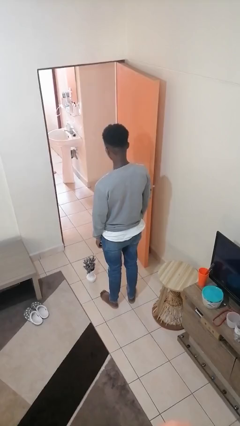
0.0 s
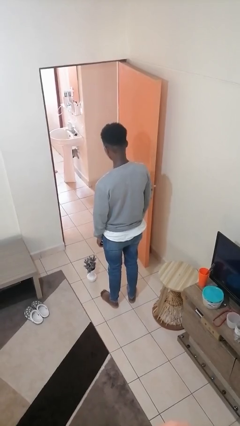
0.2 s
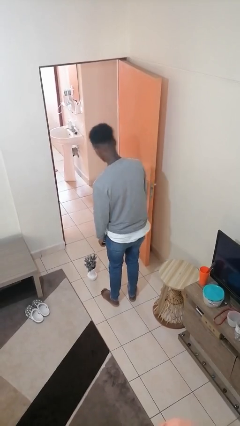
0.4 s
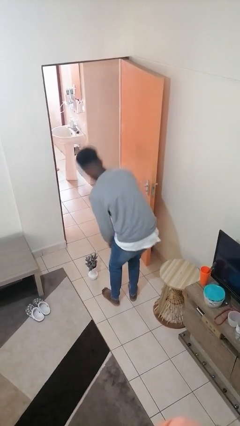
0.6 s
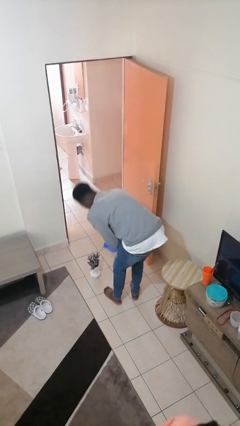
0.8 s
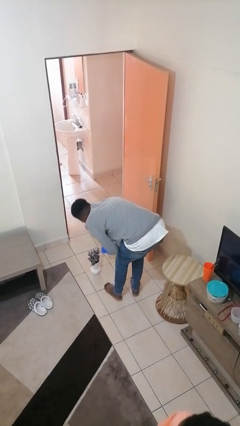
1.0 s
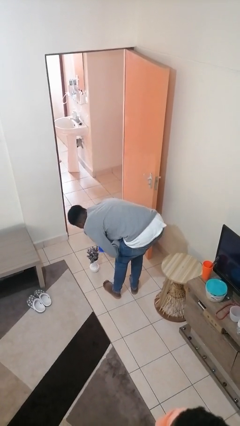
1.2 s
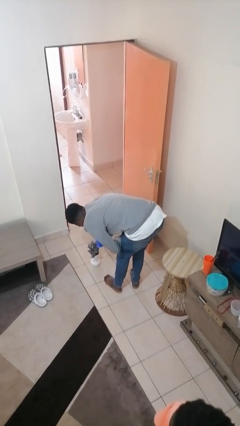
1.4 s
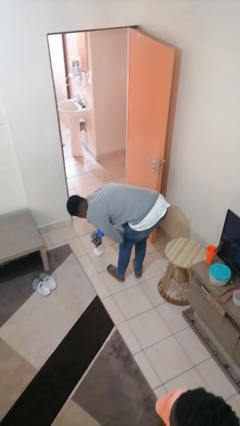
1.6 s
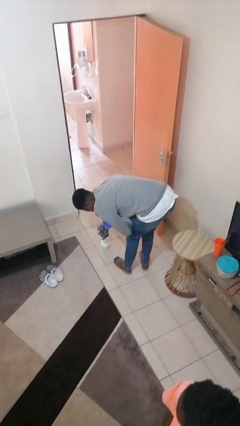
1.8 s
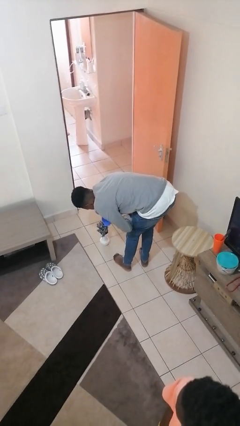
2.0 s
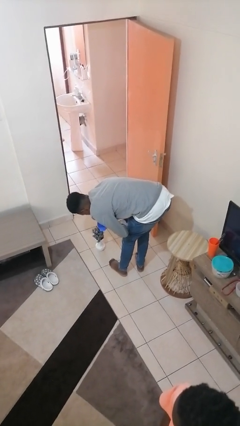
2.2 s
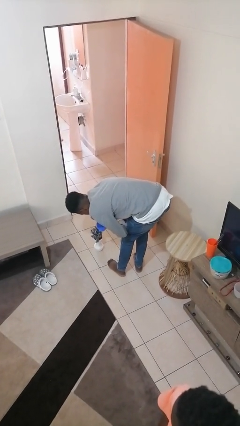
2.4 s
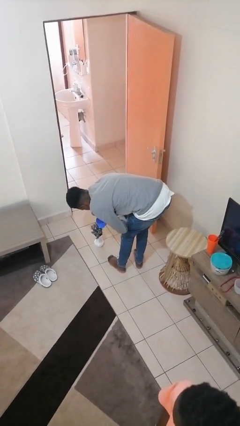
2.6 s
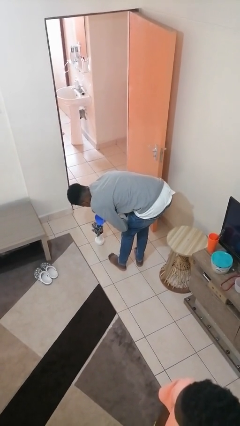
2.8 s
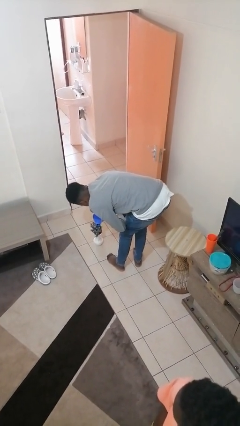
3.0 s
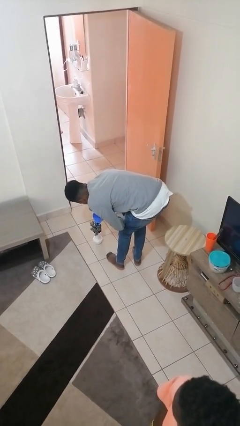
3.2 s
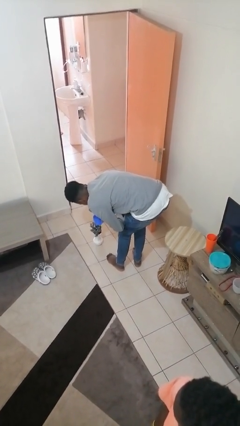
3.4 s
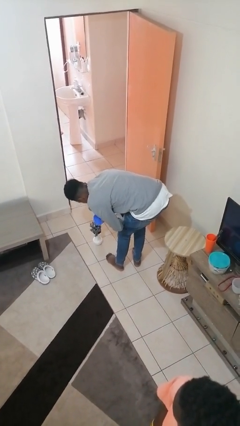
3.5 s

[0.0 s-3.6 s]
person waters houseplant

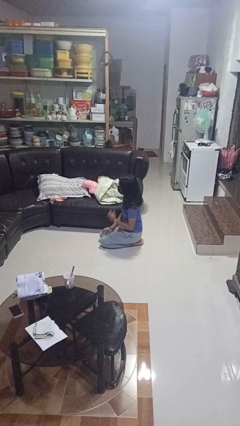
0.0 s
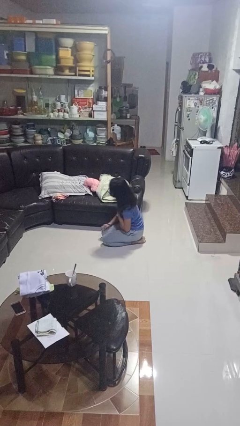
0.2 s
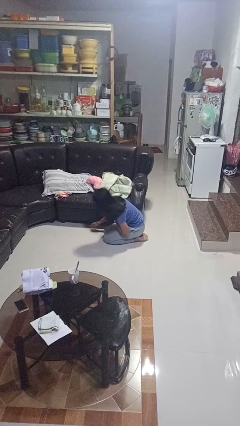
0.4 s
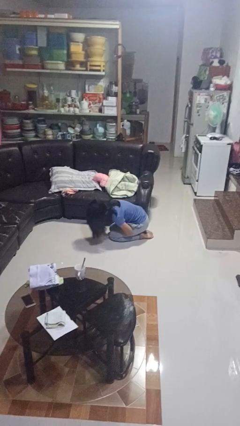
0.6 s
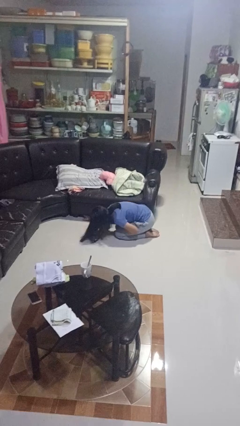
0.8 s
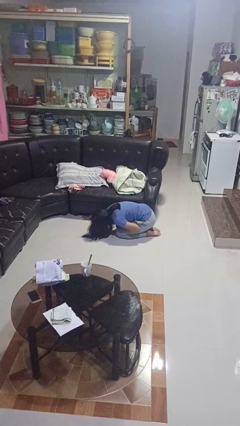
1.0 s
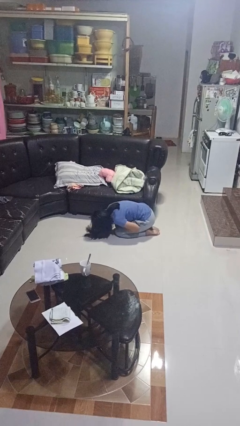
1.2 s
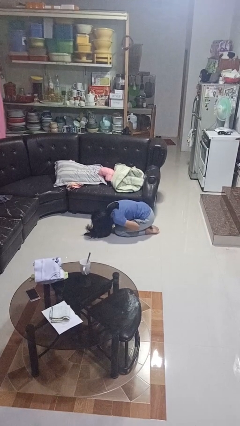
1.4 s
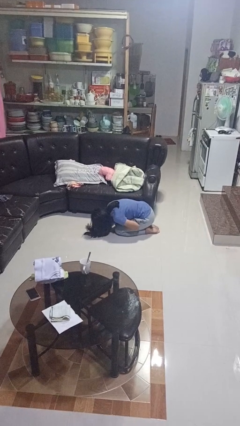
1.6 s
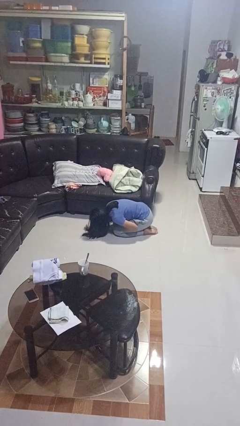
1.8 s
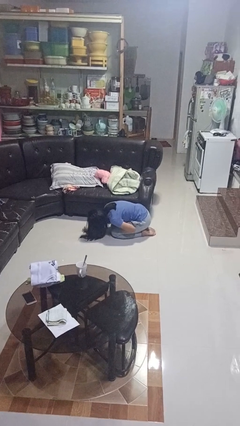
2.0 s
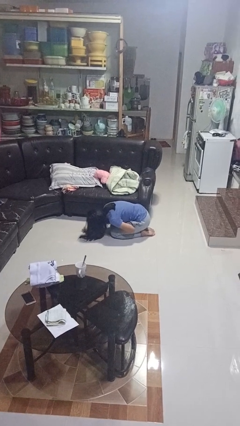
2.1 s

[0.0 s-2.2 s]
person searches under couch

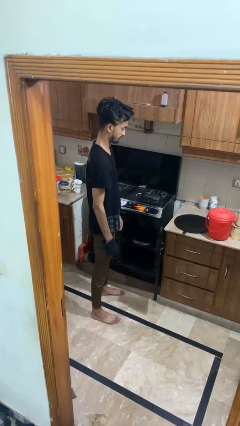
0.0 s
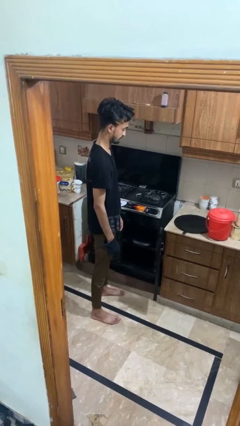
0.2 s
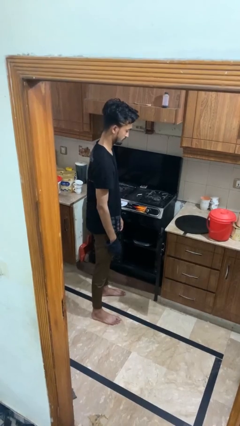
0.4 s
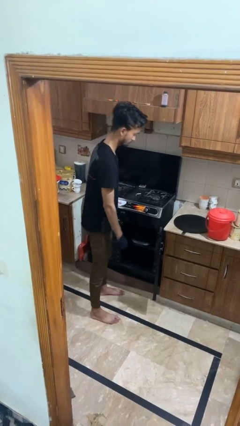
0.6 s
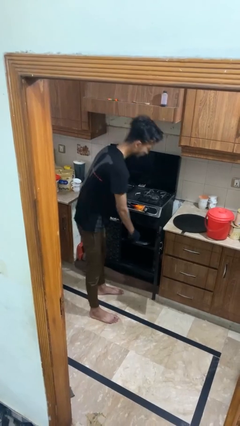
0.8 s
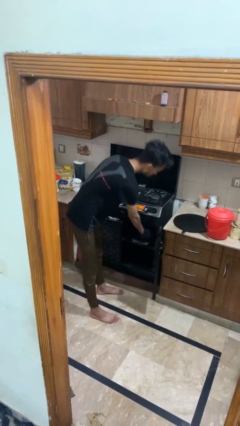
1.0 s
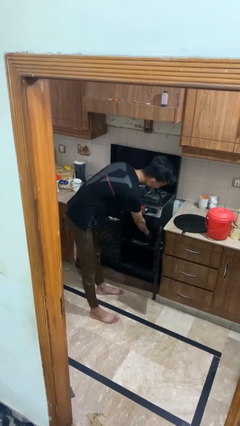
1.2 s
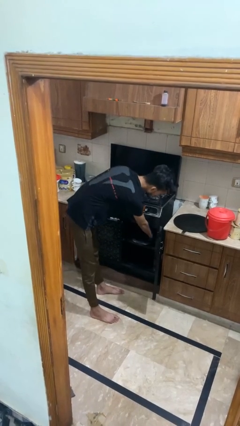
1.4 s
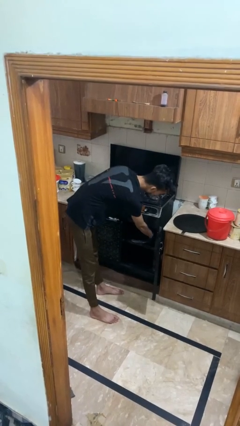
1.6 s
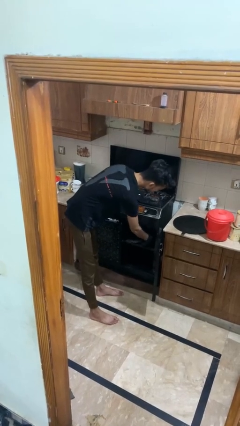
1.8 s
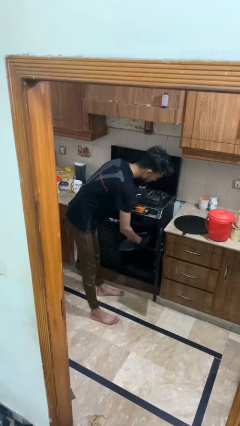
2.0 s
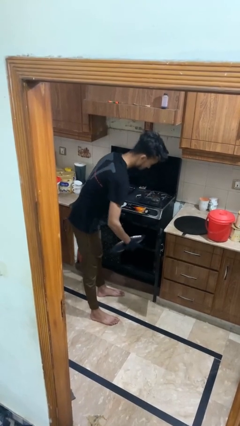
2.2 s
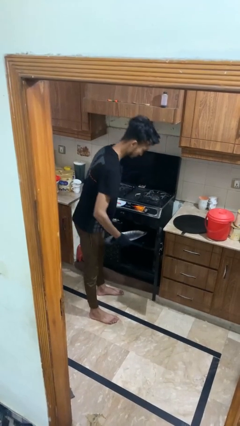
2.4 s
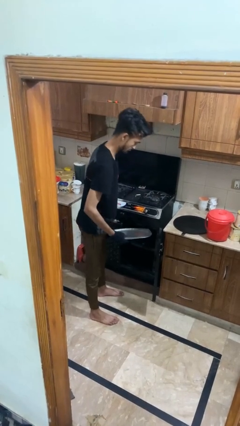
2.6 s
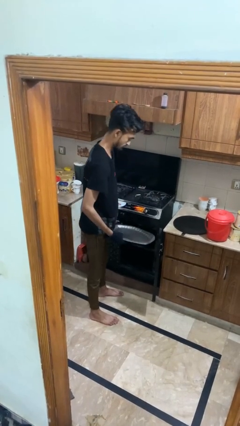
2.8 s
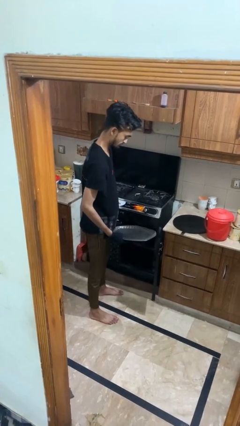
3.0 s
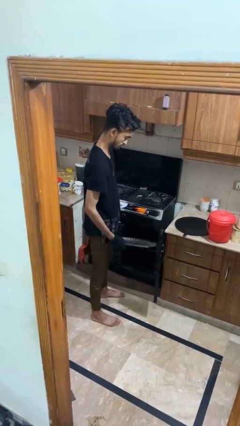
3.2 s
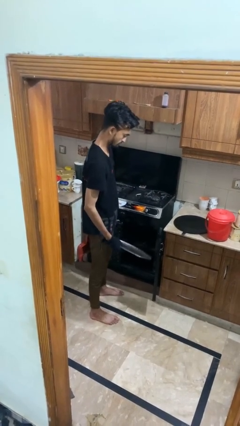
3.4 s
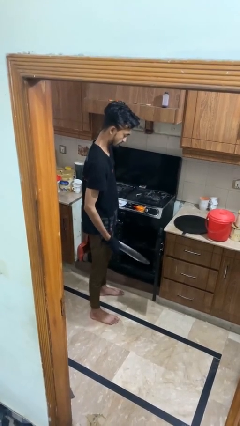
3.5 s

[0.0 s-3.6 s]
person takes object from oven

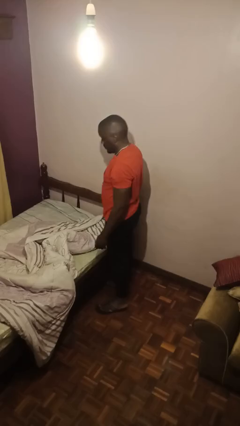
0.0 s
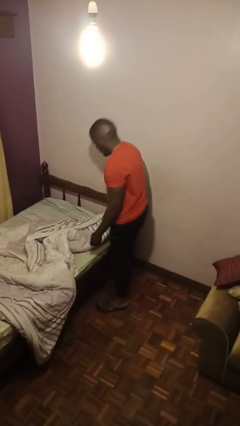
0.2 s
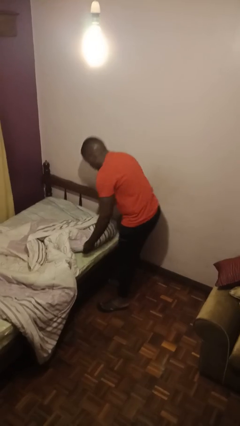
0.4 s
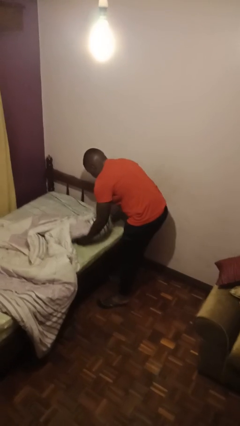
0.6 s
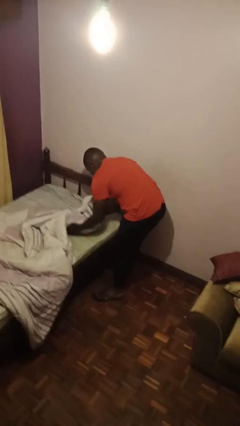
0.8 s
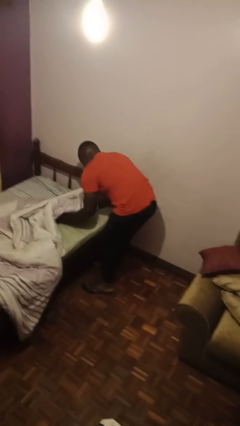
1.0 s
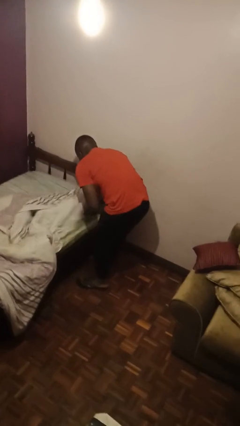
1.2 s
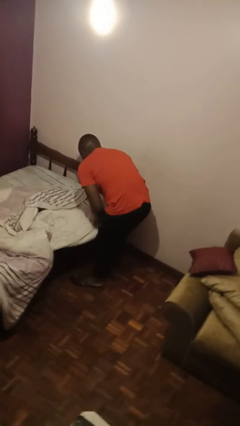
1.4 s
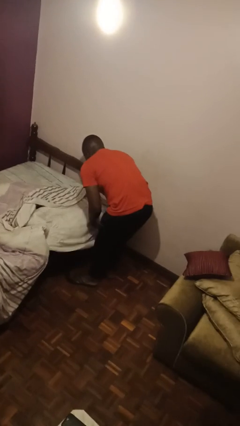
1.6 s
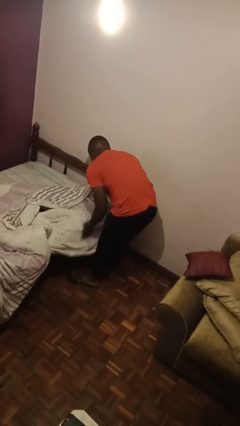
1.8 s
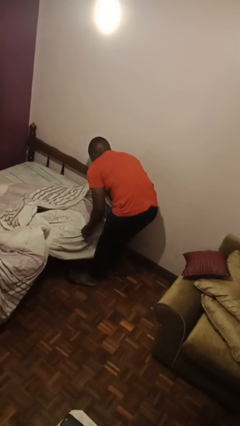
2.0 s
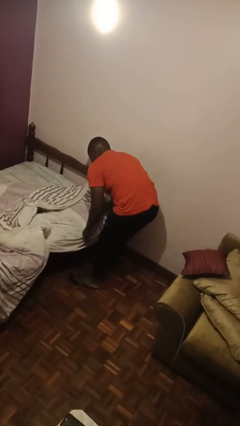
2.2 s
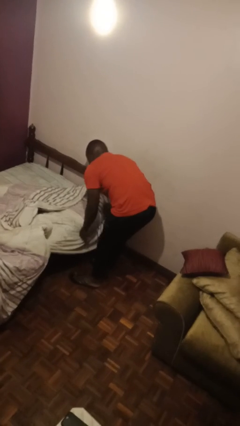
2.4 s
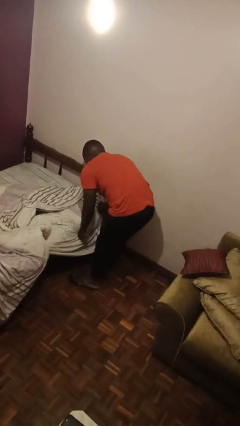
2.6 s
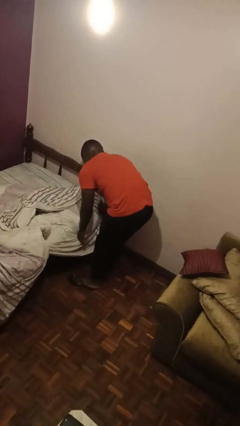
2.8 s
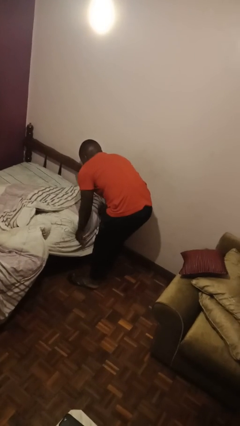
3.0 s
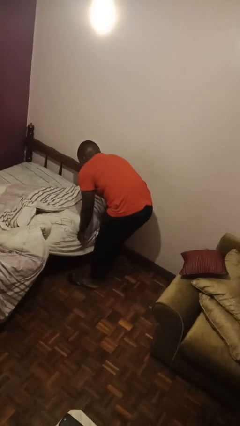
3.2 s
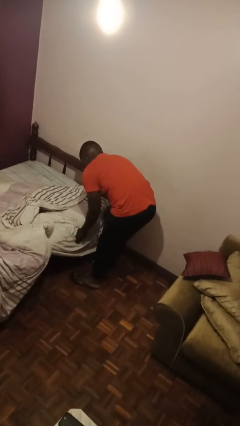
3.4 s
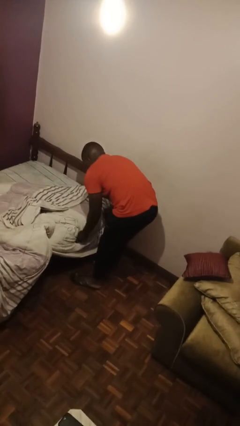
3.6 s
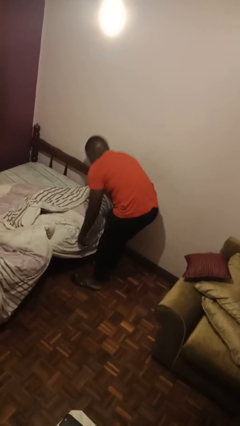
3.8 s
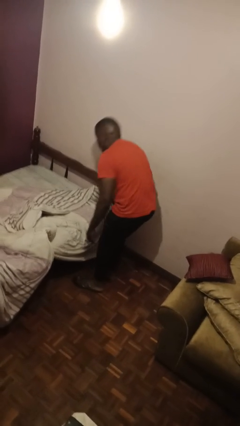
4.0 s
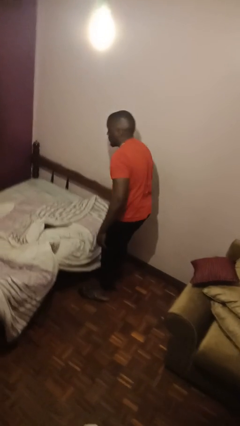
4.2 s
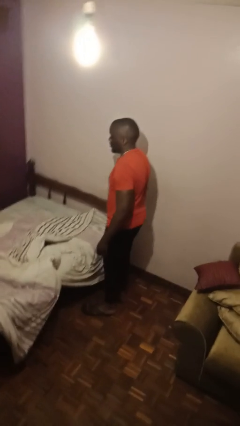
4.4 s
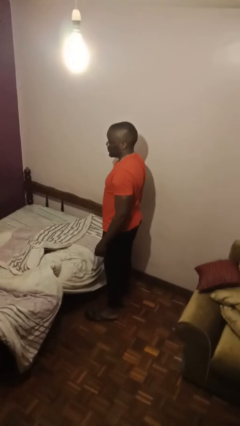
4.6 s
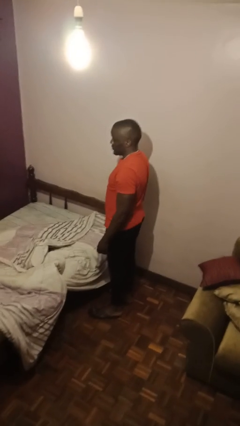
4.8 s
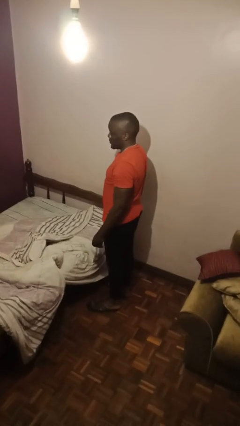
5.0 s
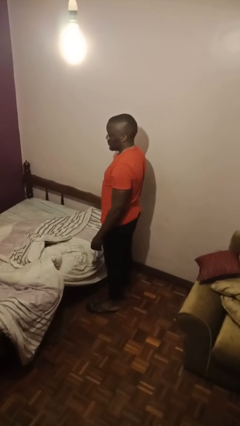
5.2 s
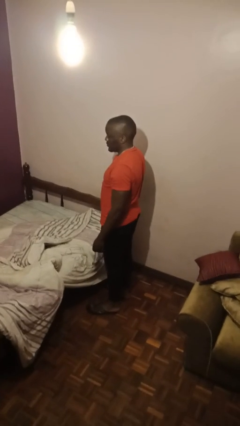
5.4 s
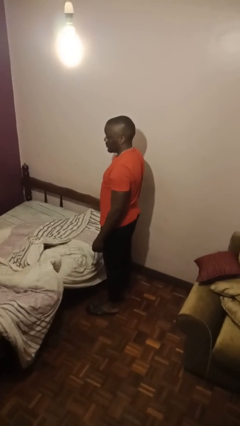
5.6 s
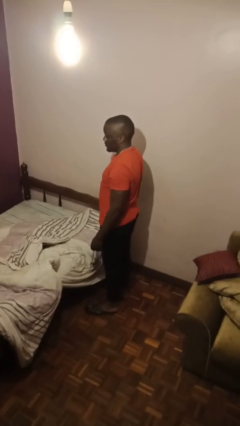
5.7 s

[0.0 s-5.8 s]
person makes bed

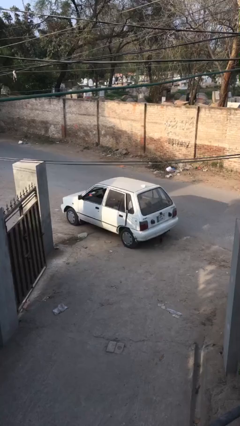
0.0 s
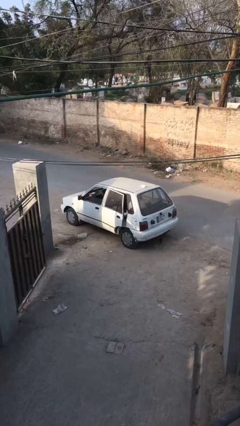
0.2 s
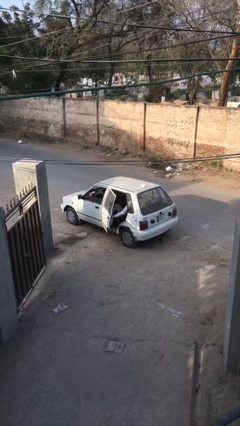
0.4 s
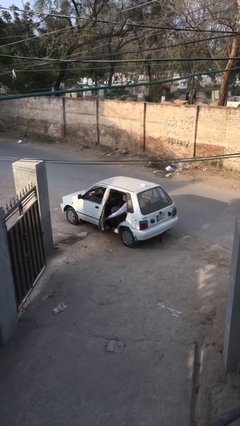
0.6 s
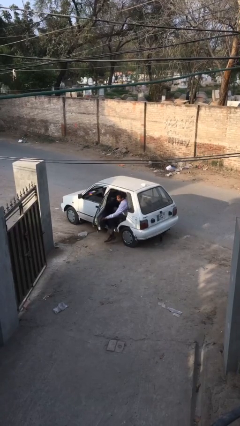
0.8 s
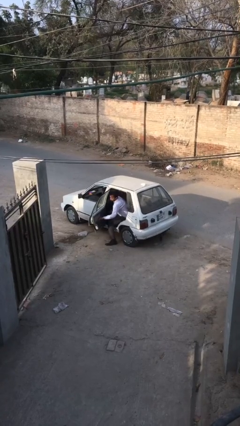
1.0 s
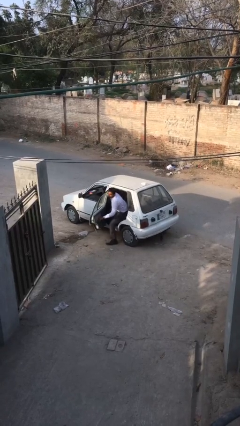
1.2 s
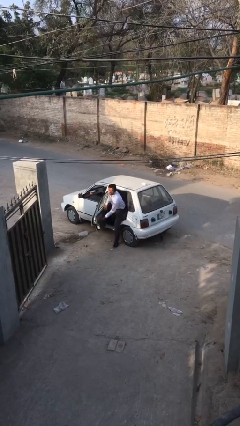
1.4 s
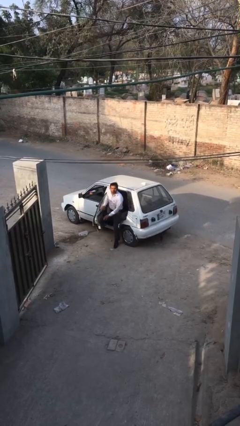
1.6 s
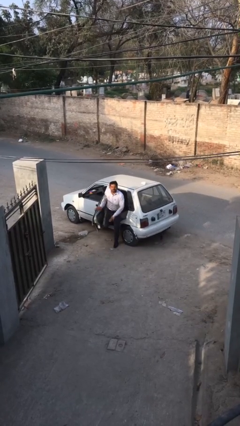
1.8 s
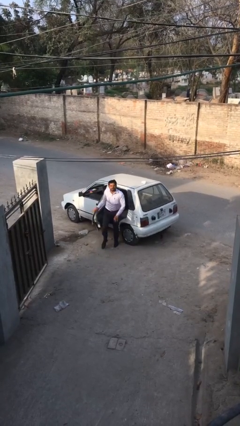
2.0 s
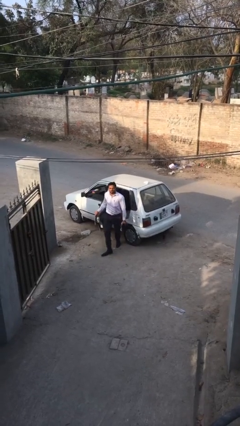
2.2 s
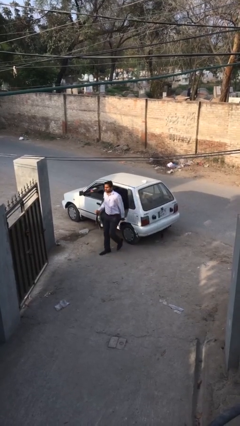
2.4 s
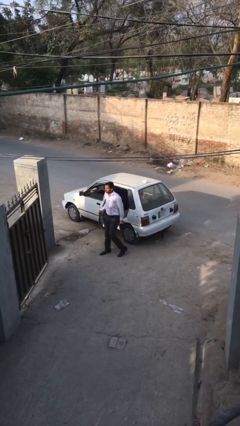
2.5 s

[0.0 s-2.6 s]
car drops off person
